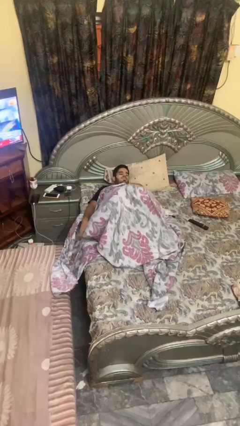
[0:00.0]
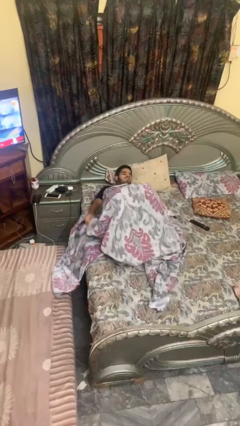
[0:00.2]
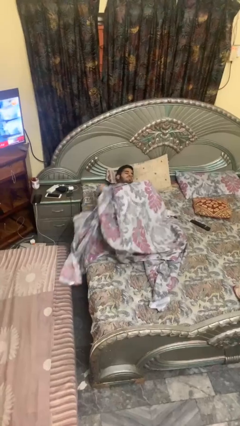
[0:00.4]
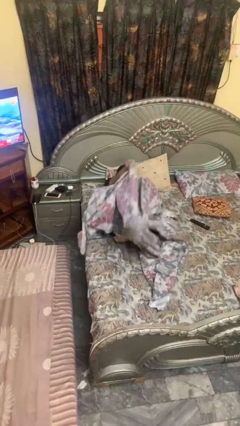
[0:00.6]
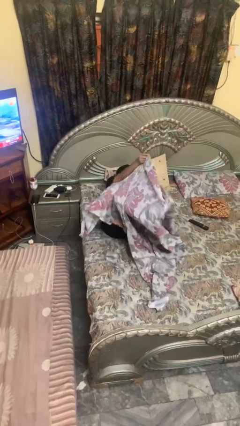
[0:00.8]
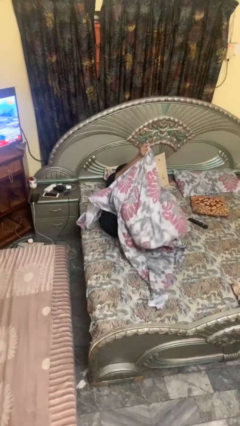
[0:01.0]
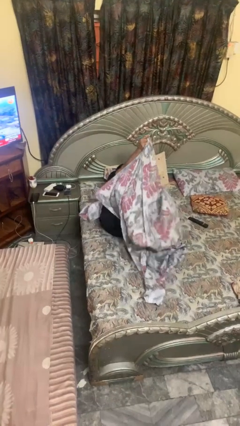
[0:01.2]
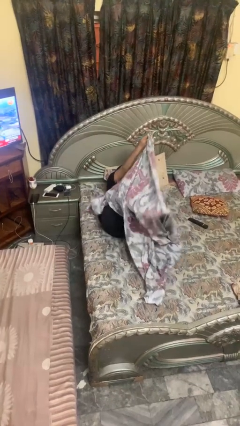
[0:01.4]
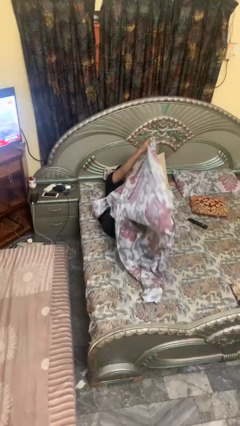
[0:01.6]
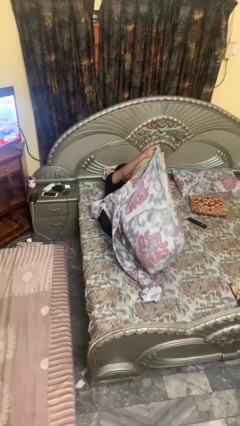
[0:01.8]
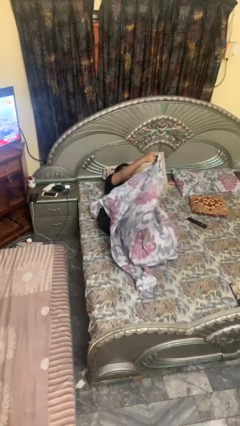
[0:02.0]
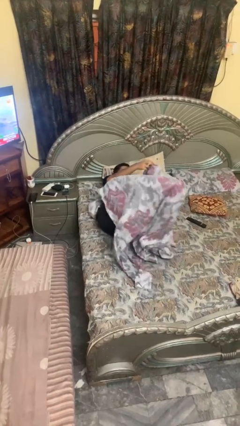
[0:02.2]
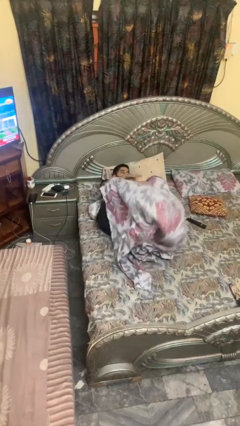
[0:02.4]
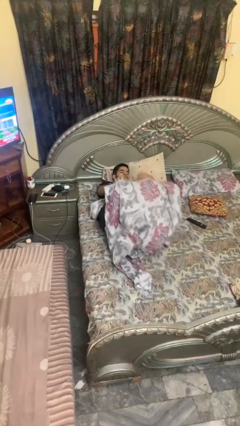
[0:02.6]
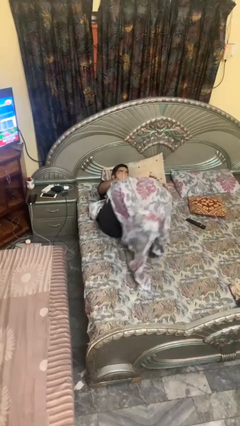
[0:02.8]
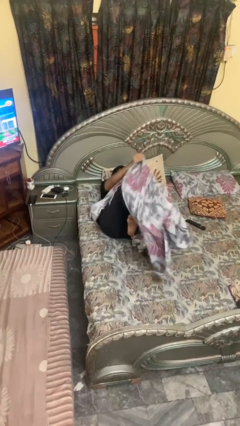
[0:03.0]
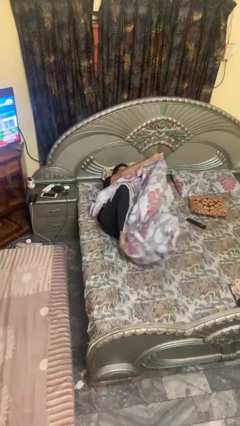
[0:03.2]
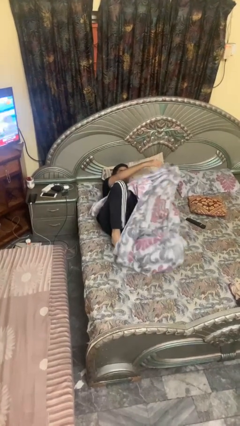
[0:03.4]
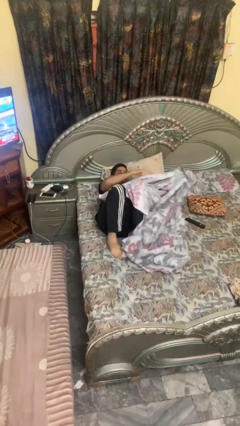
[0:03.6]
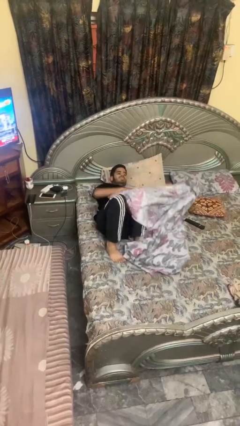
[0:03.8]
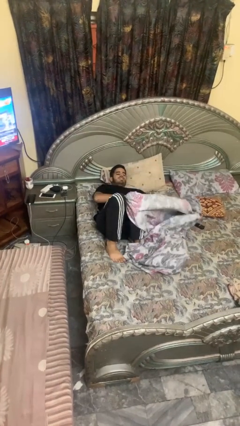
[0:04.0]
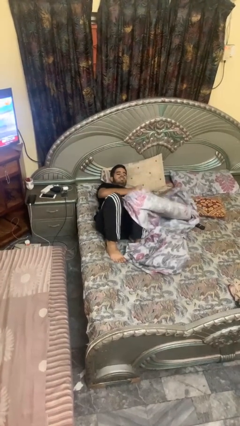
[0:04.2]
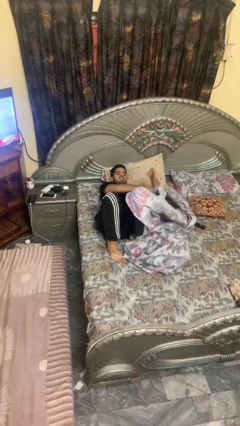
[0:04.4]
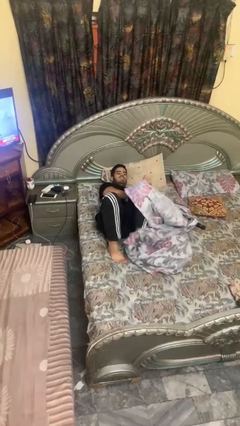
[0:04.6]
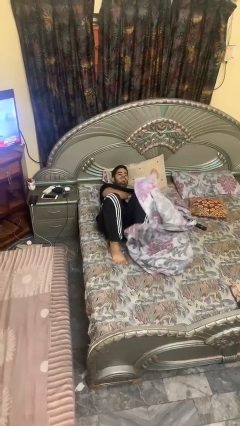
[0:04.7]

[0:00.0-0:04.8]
person uncovers with bedsheets

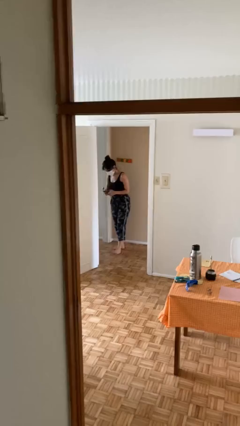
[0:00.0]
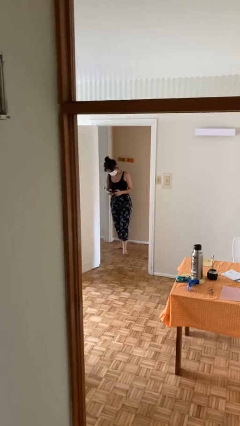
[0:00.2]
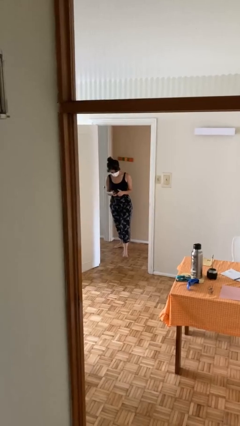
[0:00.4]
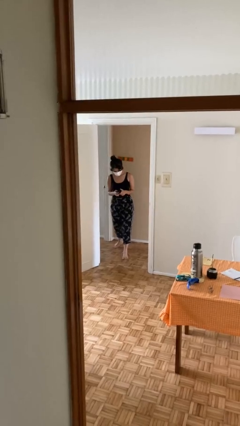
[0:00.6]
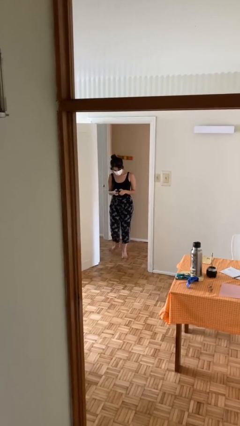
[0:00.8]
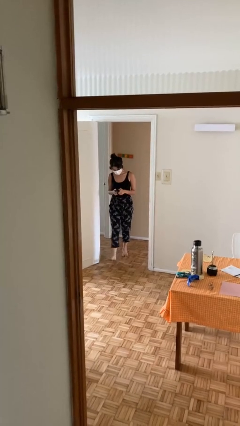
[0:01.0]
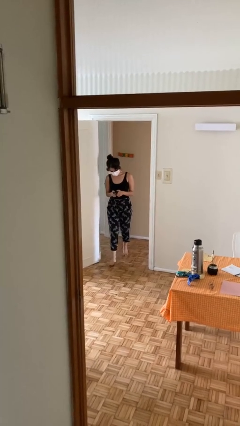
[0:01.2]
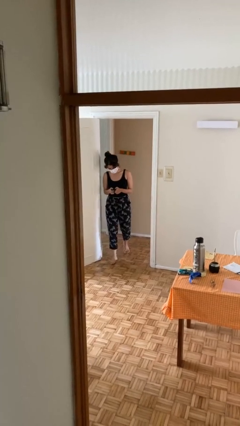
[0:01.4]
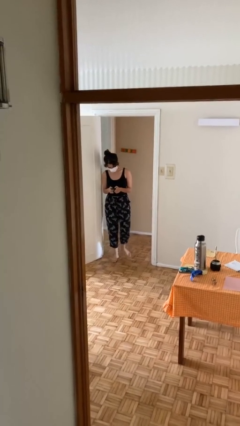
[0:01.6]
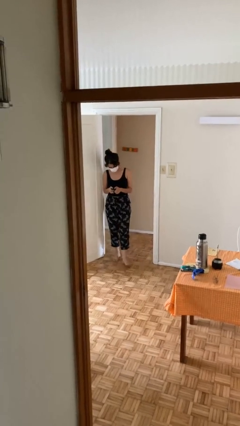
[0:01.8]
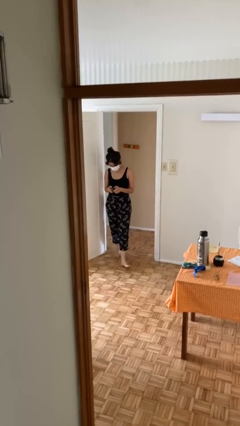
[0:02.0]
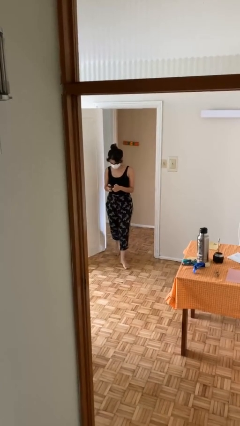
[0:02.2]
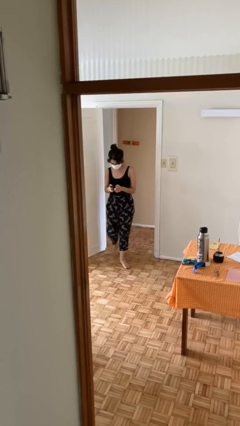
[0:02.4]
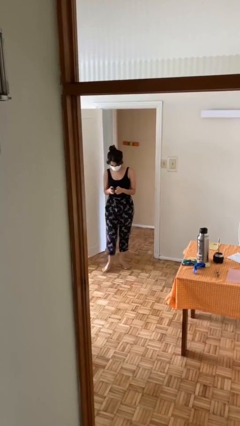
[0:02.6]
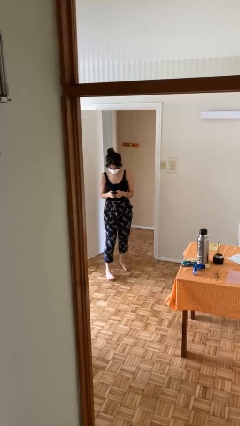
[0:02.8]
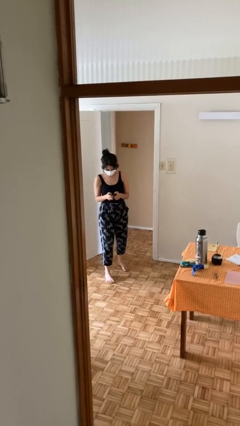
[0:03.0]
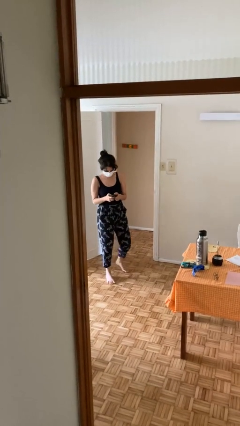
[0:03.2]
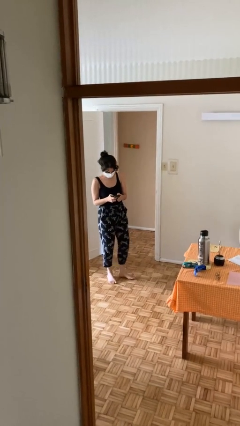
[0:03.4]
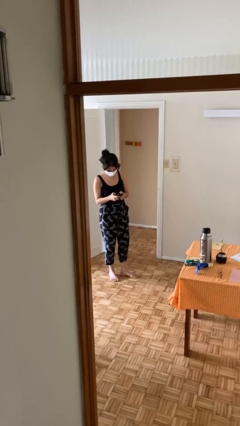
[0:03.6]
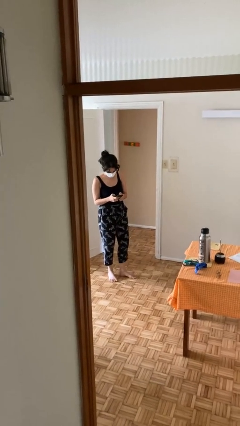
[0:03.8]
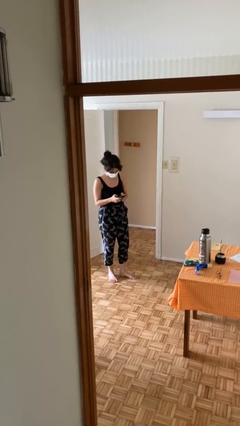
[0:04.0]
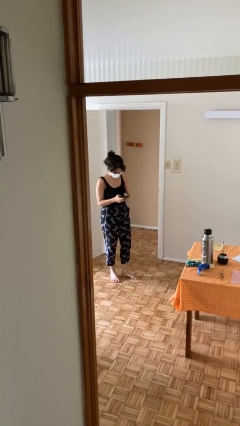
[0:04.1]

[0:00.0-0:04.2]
person enters scene through structure

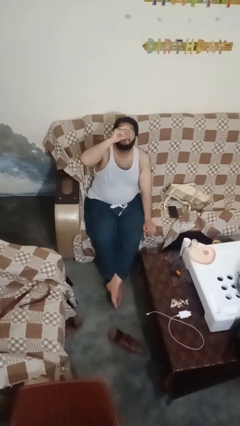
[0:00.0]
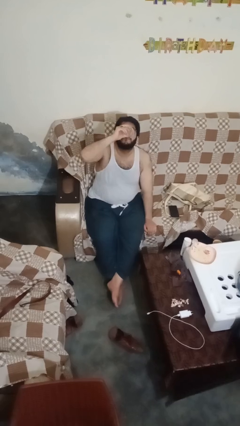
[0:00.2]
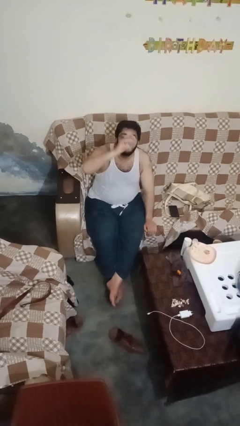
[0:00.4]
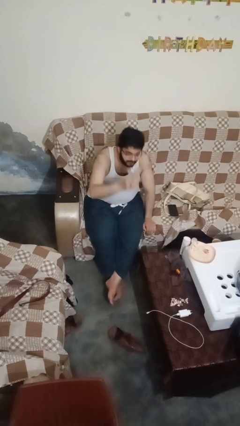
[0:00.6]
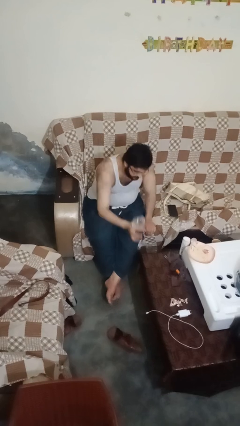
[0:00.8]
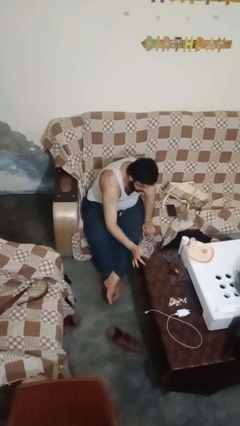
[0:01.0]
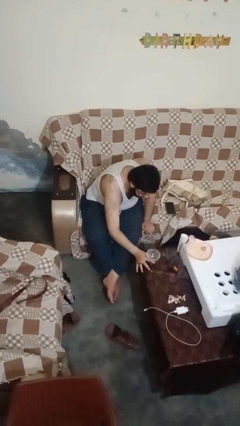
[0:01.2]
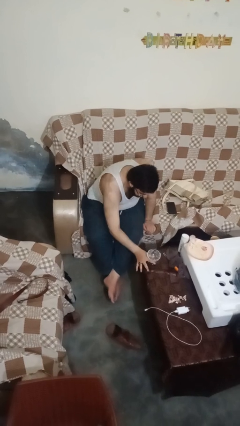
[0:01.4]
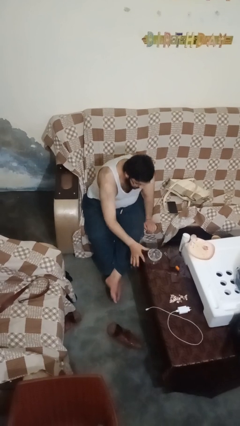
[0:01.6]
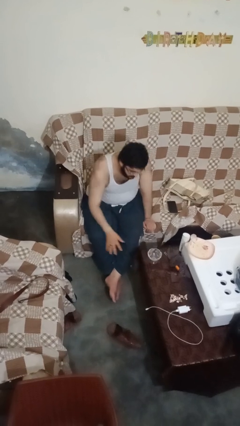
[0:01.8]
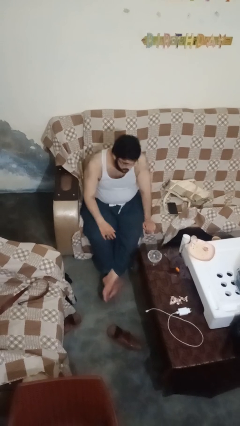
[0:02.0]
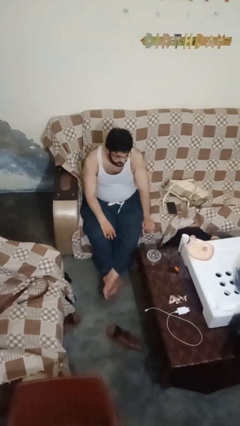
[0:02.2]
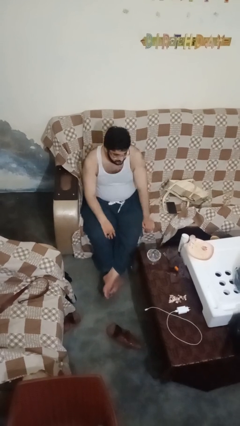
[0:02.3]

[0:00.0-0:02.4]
person puts down object on table

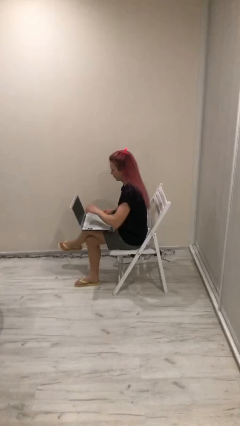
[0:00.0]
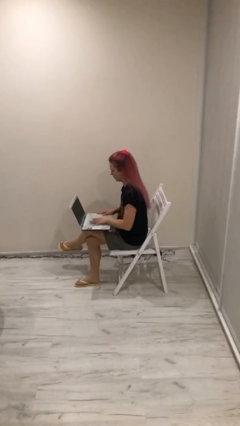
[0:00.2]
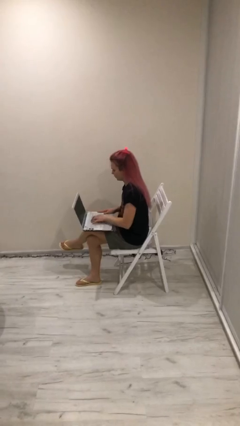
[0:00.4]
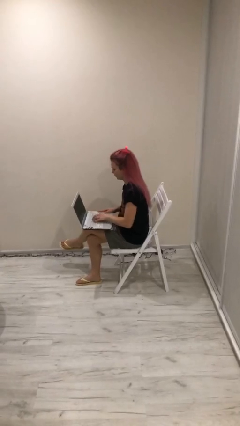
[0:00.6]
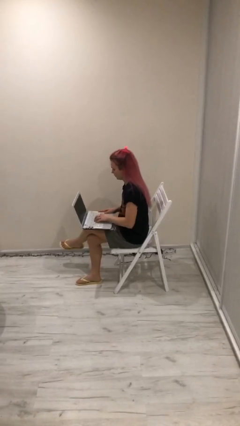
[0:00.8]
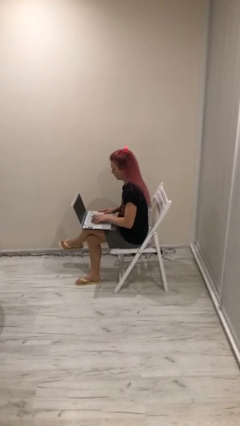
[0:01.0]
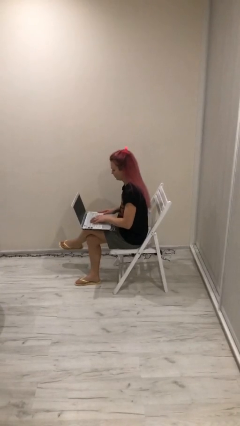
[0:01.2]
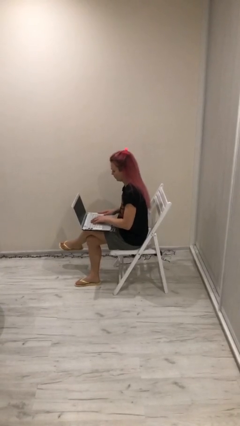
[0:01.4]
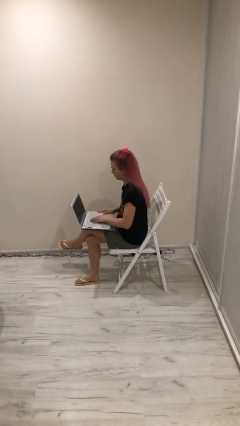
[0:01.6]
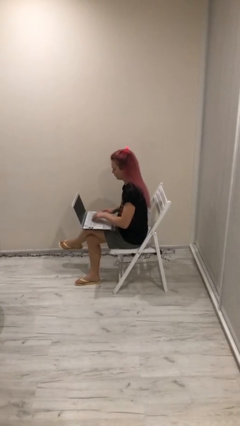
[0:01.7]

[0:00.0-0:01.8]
person interacts with laptop

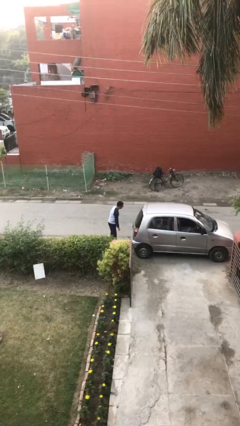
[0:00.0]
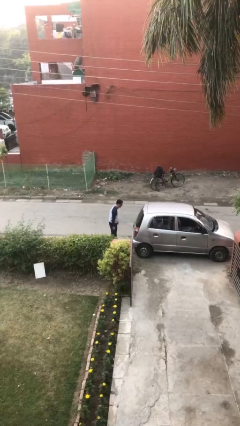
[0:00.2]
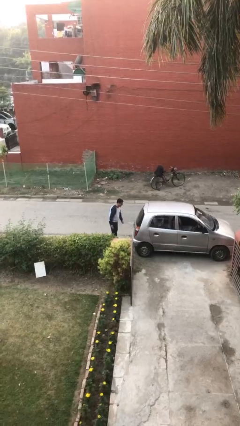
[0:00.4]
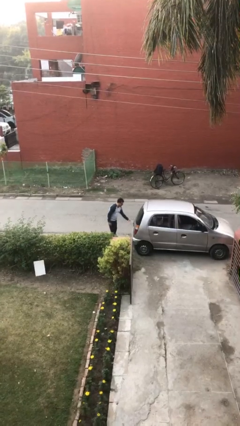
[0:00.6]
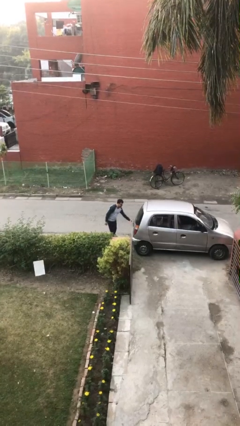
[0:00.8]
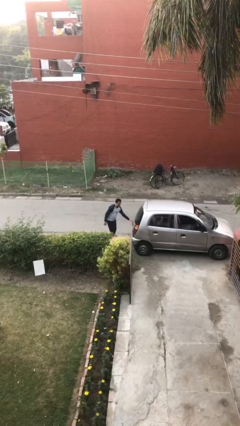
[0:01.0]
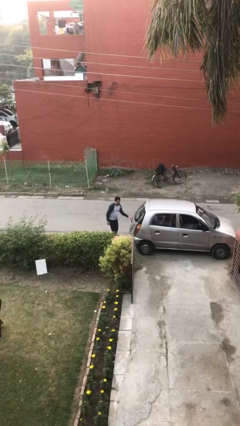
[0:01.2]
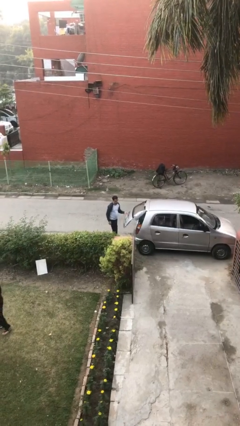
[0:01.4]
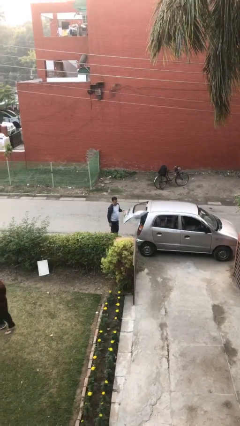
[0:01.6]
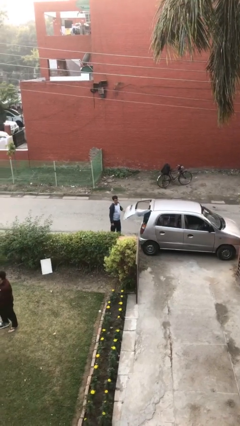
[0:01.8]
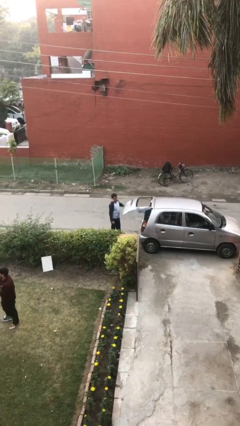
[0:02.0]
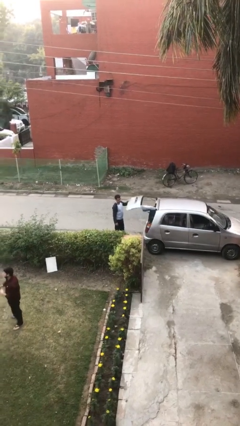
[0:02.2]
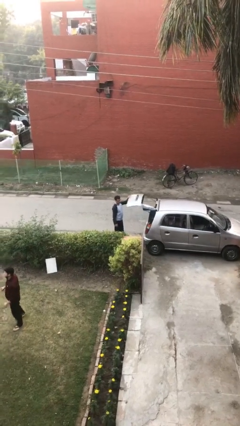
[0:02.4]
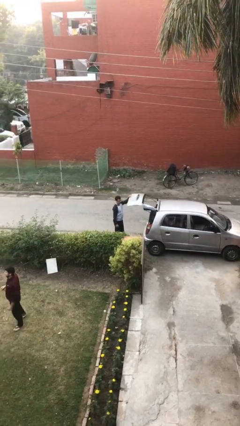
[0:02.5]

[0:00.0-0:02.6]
person opens car trunk

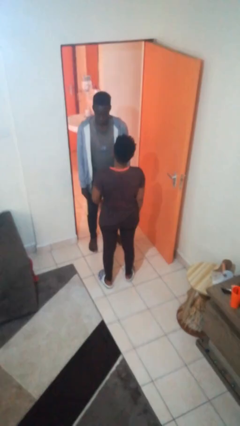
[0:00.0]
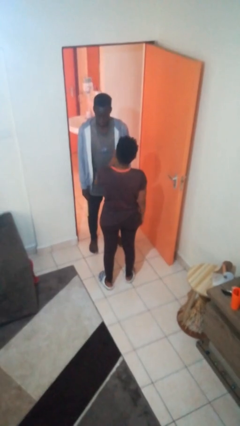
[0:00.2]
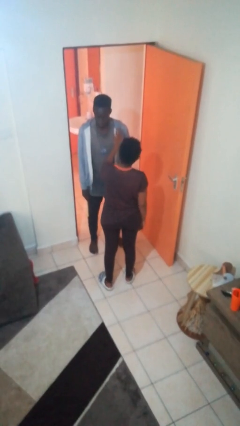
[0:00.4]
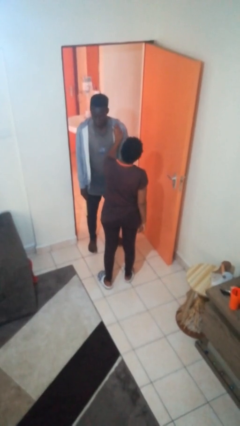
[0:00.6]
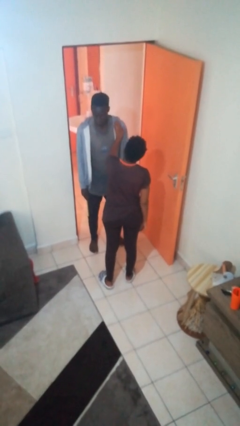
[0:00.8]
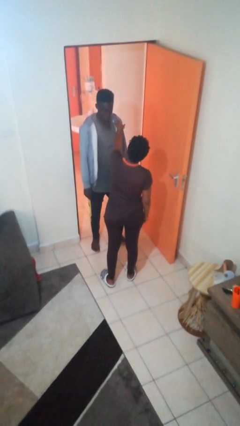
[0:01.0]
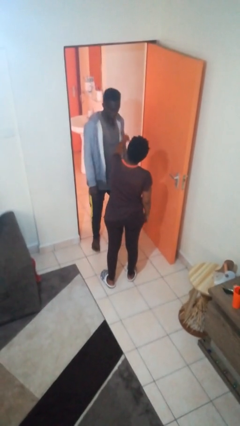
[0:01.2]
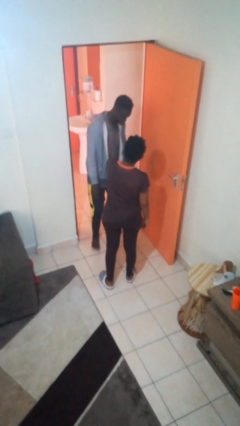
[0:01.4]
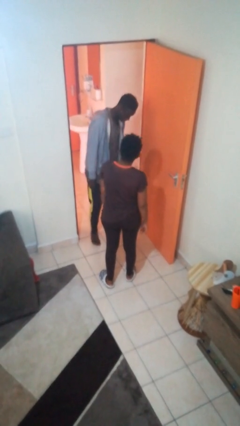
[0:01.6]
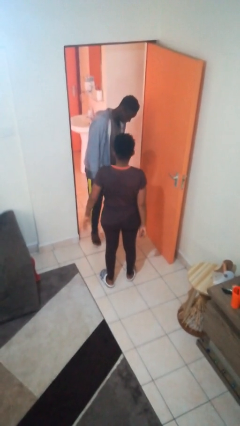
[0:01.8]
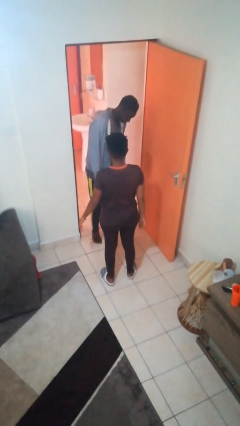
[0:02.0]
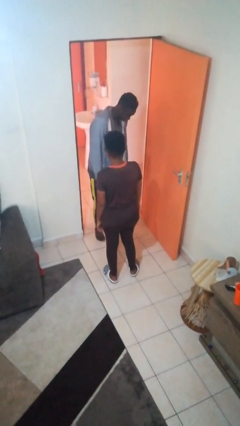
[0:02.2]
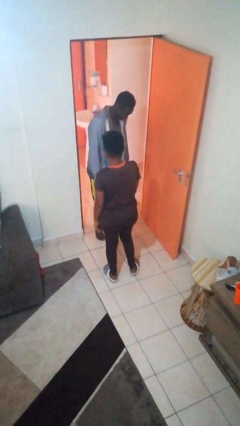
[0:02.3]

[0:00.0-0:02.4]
person shoves person
